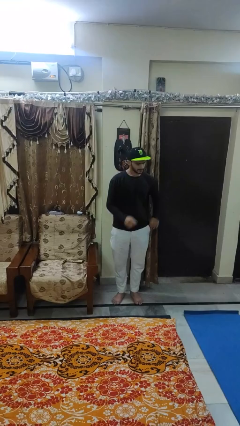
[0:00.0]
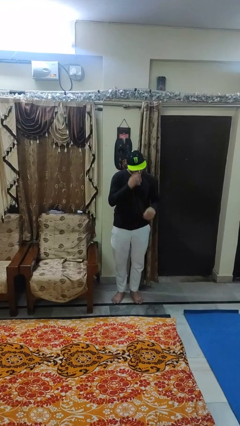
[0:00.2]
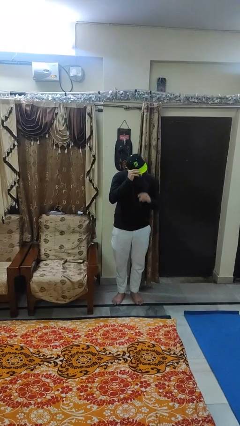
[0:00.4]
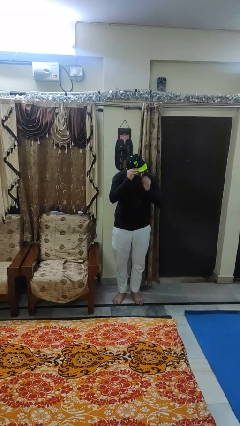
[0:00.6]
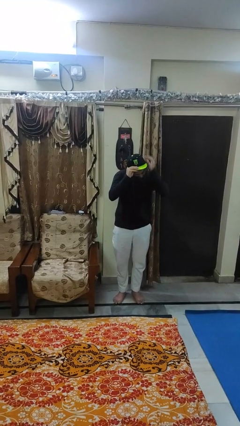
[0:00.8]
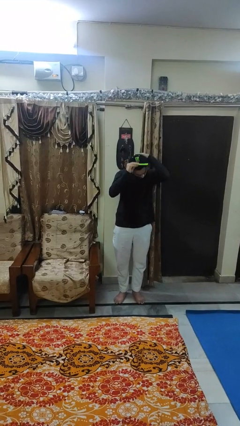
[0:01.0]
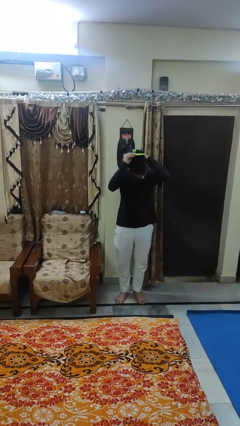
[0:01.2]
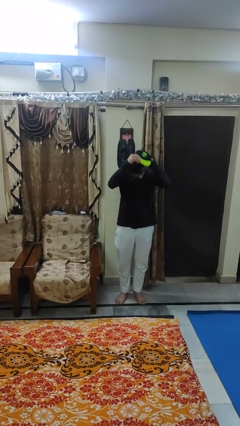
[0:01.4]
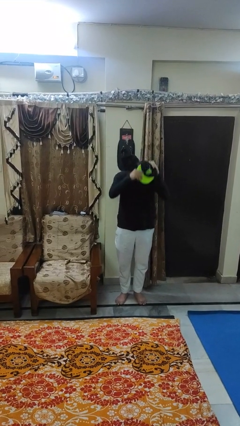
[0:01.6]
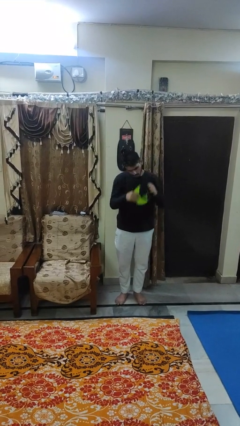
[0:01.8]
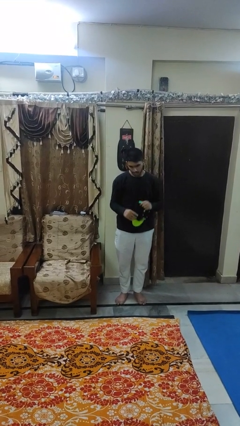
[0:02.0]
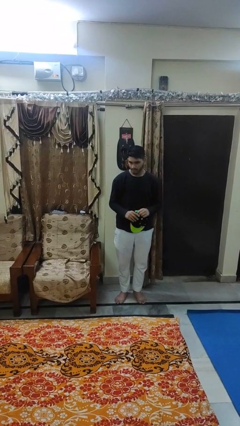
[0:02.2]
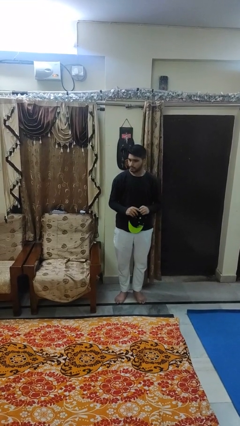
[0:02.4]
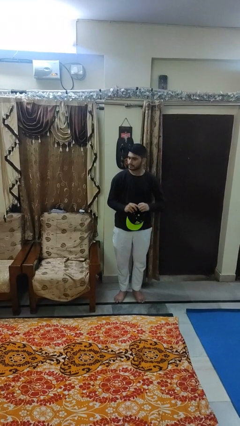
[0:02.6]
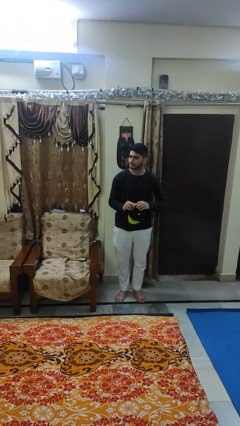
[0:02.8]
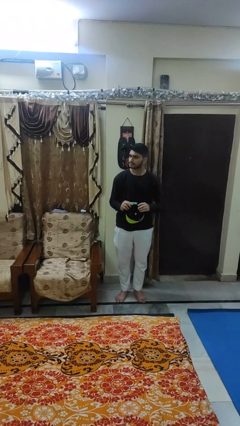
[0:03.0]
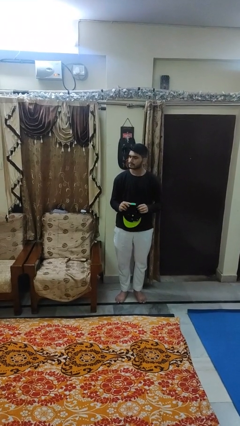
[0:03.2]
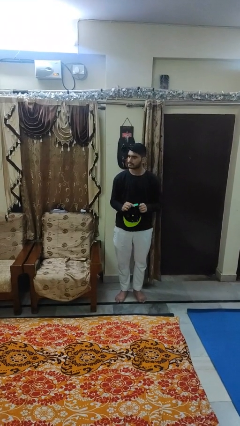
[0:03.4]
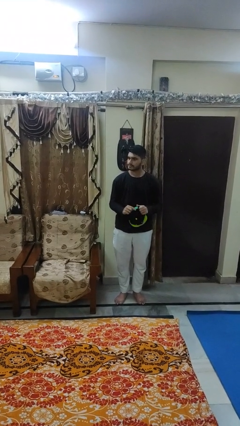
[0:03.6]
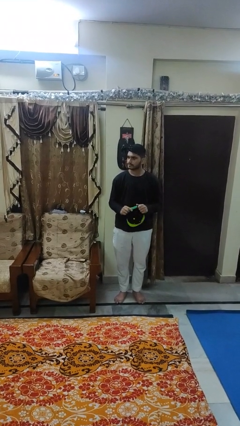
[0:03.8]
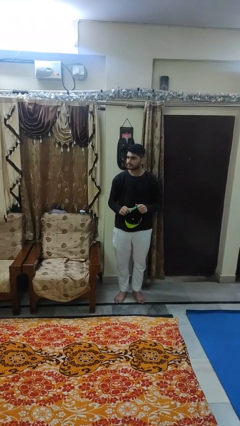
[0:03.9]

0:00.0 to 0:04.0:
person takes off hat

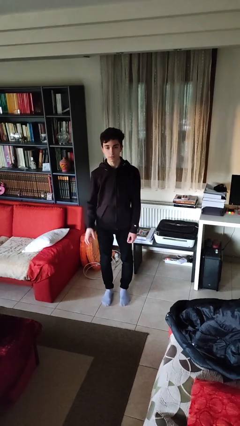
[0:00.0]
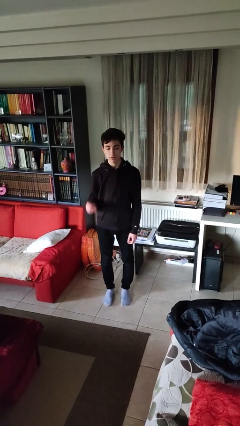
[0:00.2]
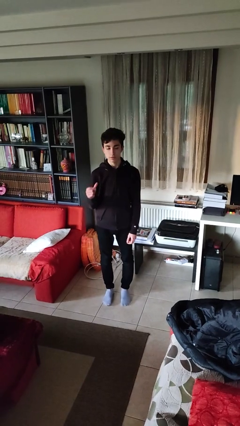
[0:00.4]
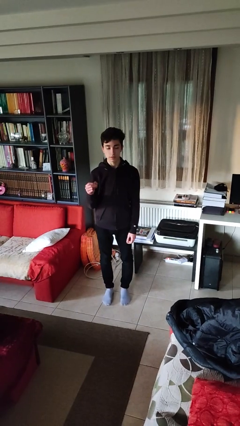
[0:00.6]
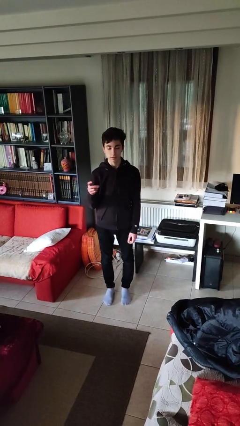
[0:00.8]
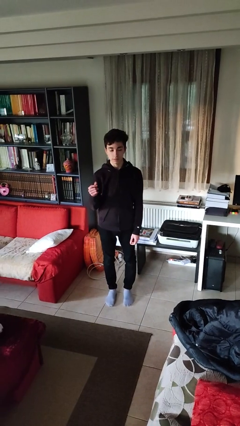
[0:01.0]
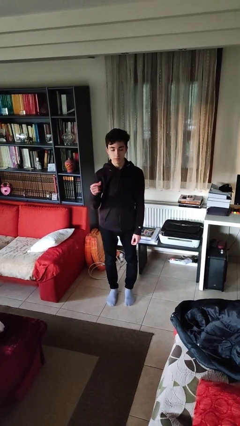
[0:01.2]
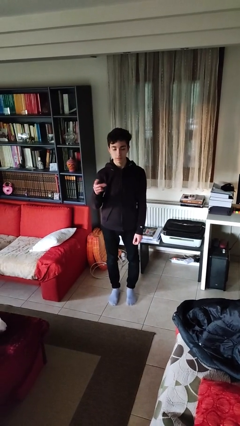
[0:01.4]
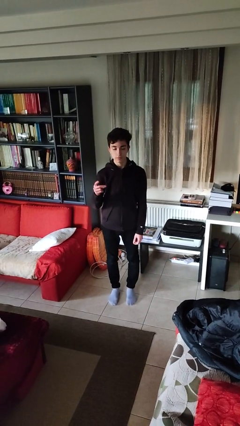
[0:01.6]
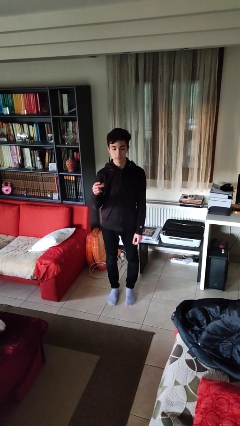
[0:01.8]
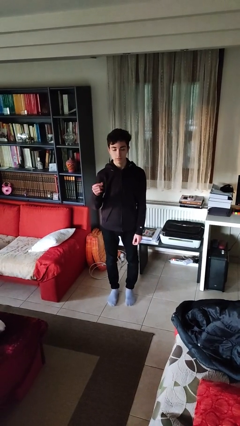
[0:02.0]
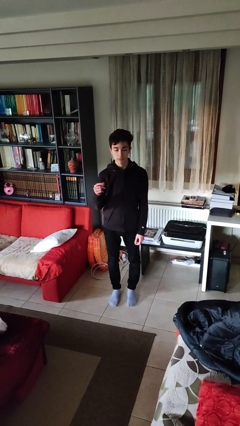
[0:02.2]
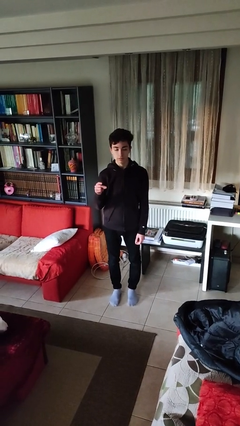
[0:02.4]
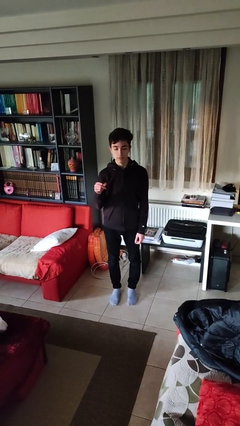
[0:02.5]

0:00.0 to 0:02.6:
person snaps fingers

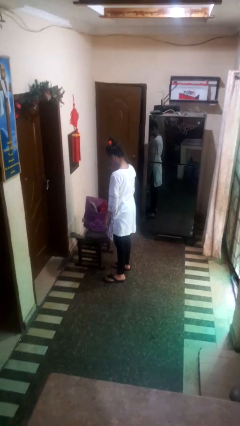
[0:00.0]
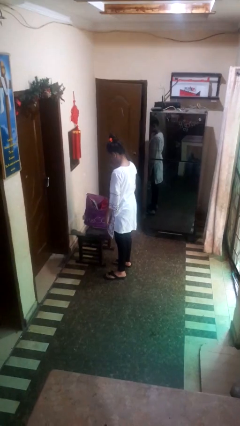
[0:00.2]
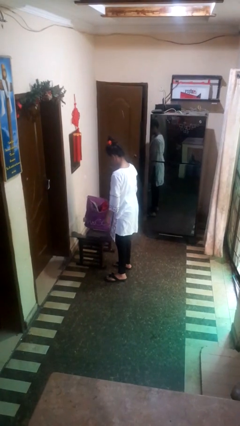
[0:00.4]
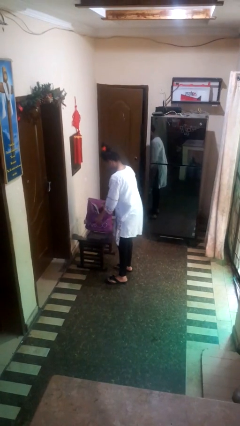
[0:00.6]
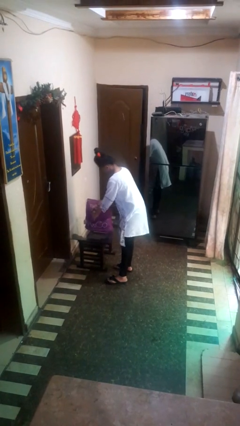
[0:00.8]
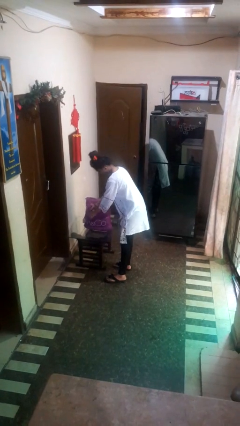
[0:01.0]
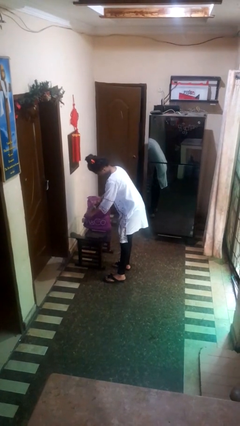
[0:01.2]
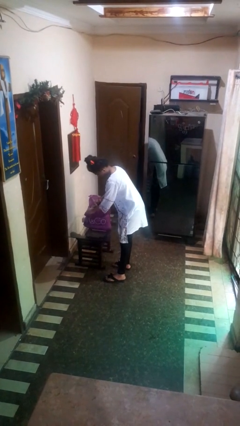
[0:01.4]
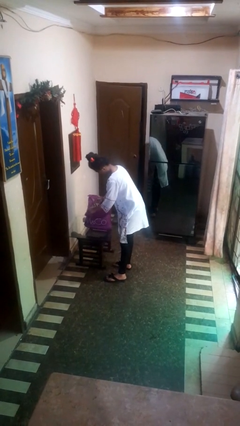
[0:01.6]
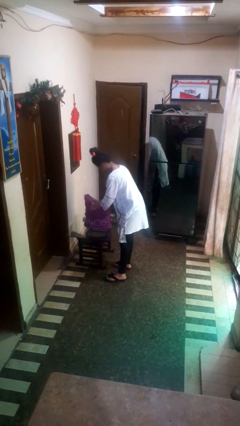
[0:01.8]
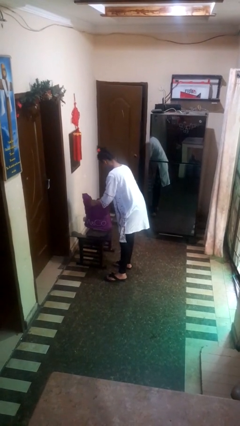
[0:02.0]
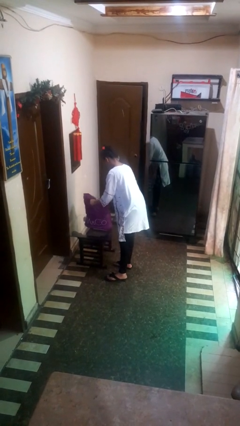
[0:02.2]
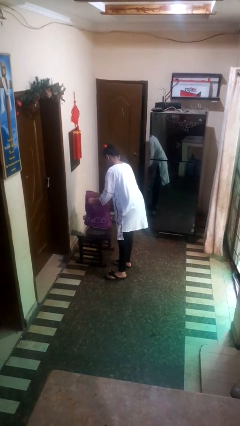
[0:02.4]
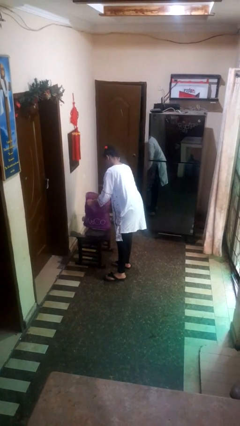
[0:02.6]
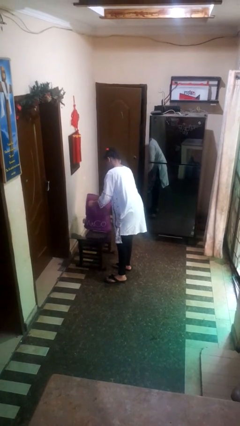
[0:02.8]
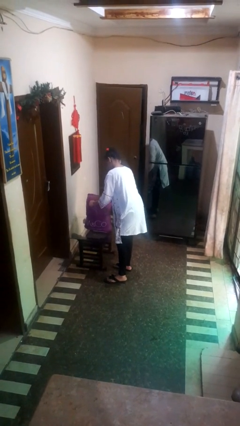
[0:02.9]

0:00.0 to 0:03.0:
person searches in bag

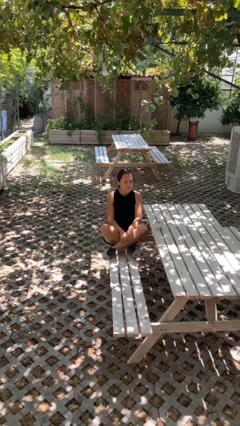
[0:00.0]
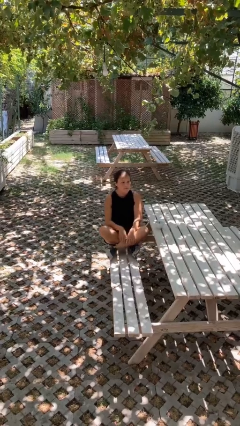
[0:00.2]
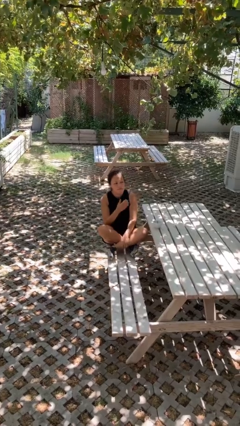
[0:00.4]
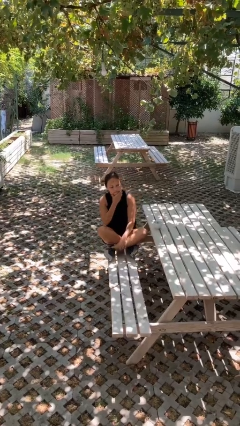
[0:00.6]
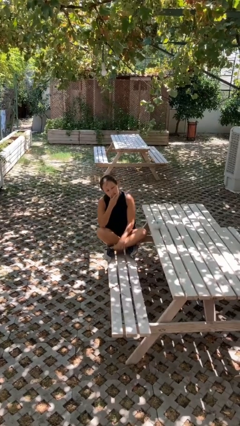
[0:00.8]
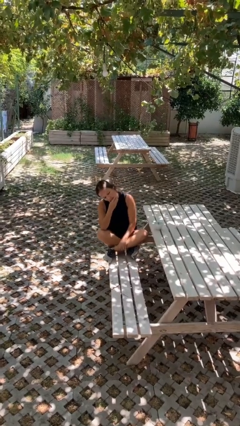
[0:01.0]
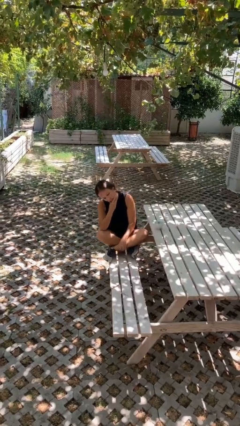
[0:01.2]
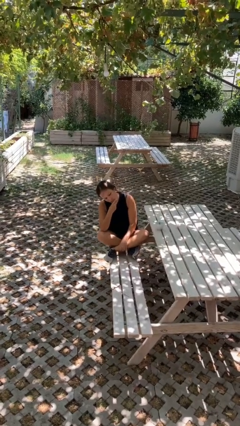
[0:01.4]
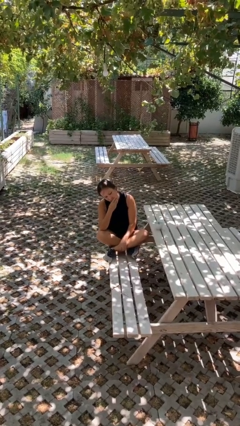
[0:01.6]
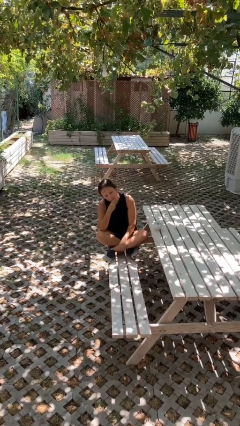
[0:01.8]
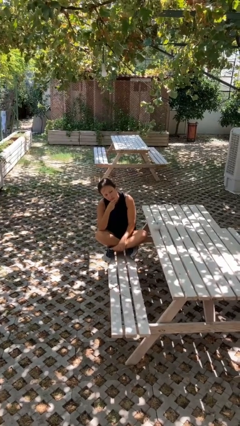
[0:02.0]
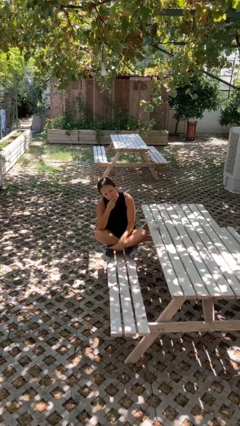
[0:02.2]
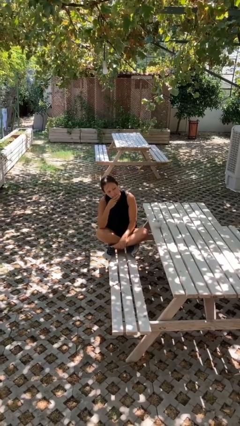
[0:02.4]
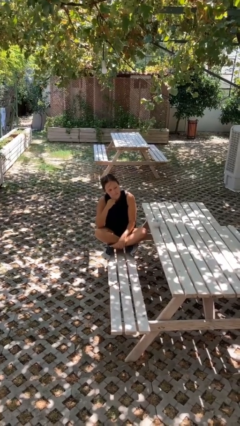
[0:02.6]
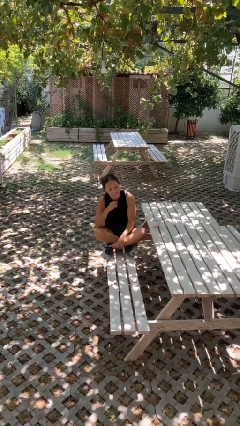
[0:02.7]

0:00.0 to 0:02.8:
person strokes chin

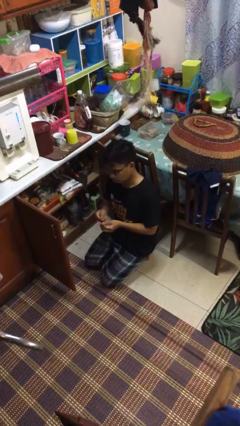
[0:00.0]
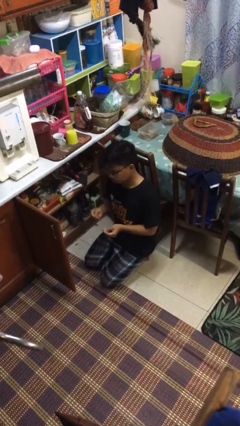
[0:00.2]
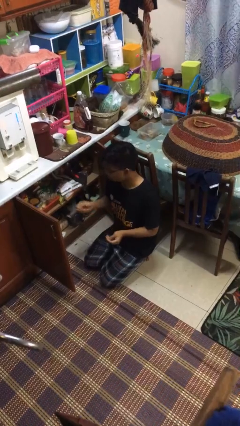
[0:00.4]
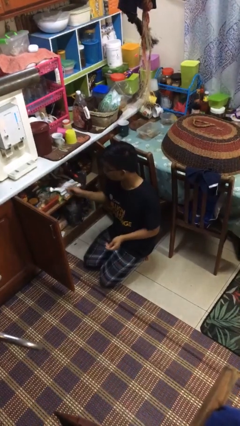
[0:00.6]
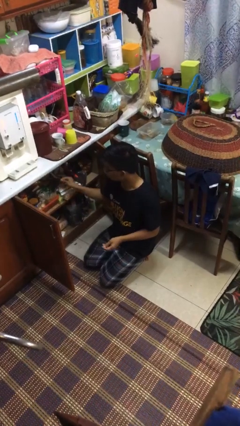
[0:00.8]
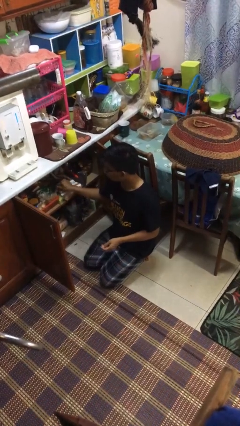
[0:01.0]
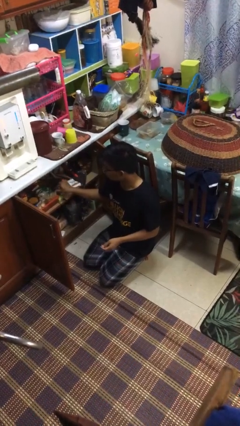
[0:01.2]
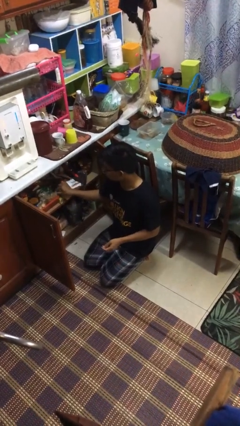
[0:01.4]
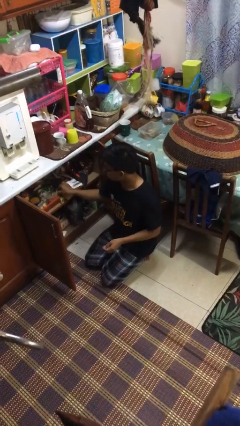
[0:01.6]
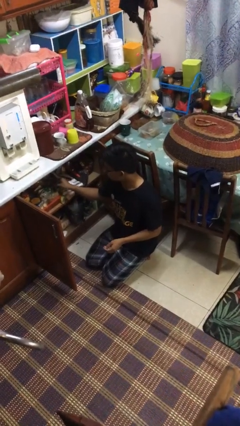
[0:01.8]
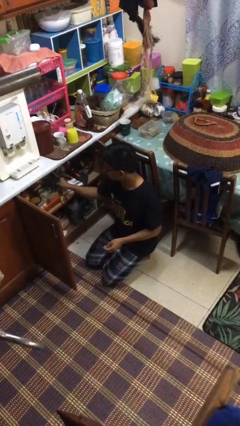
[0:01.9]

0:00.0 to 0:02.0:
person puts object into kitchen drawer

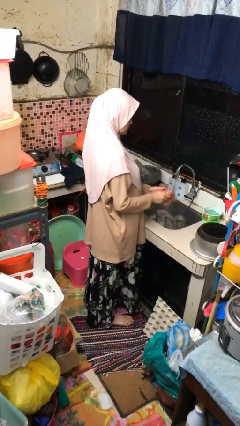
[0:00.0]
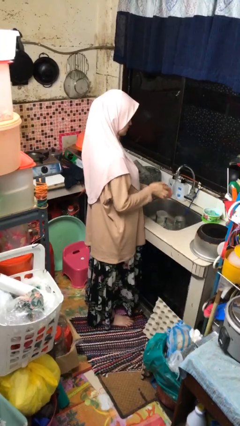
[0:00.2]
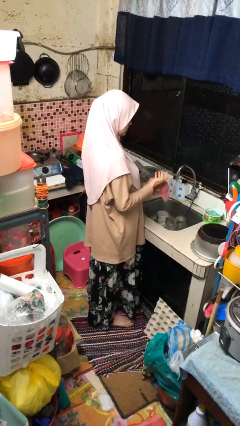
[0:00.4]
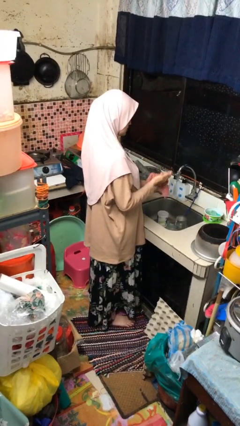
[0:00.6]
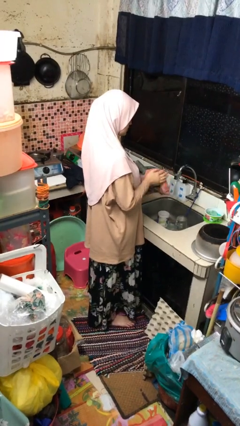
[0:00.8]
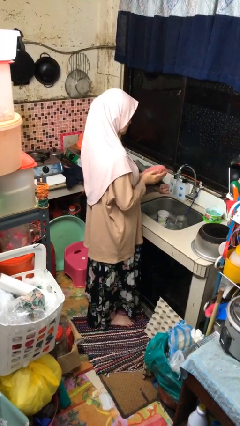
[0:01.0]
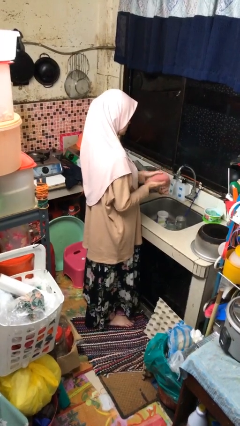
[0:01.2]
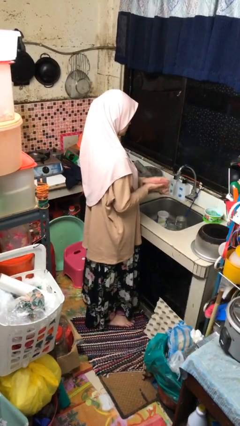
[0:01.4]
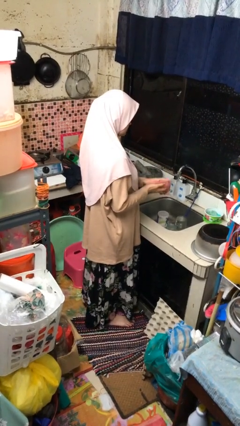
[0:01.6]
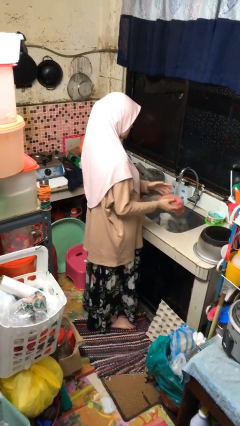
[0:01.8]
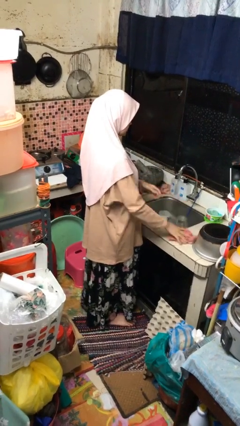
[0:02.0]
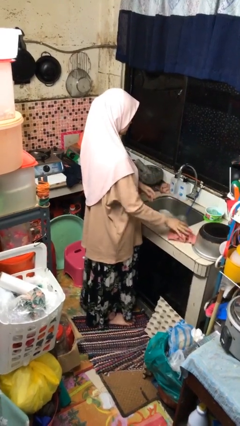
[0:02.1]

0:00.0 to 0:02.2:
person dries hands with towel

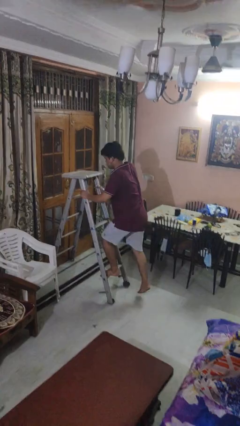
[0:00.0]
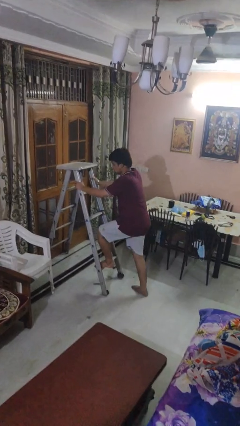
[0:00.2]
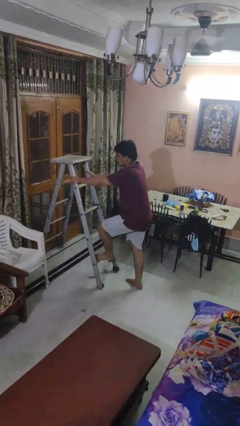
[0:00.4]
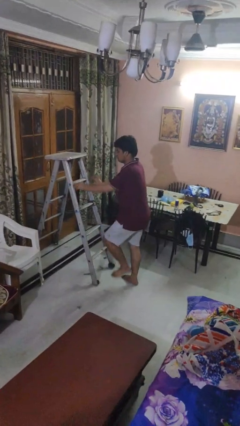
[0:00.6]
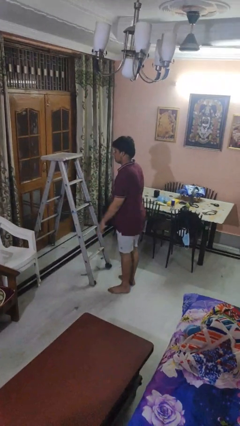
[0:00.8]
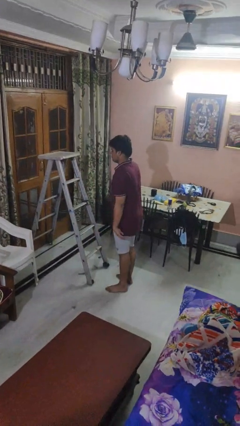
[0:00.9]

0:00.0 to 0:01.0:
person climbs down ladder
